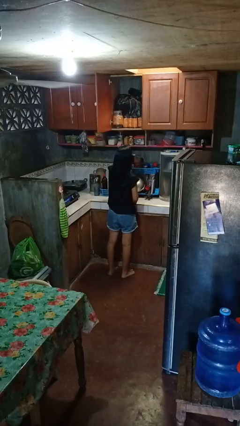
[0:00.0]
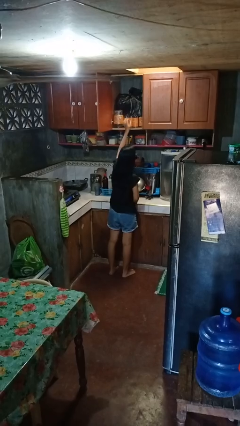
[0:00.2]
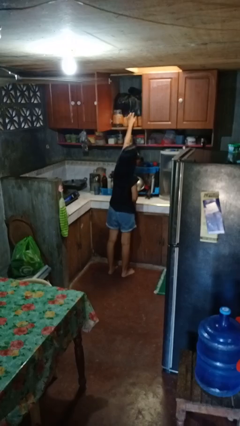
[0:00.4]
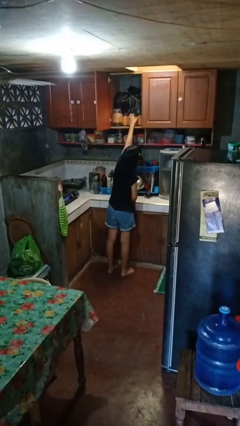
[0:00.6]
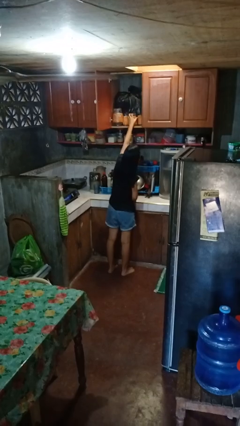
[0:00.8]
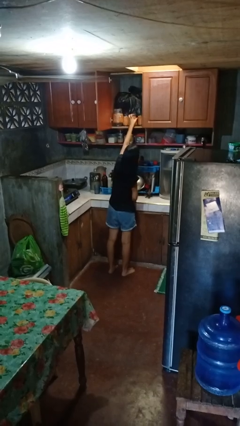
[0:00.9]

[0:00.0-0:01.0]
person picks up object from cabinet

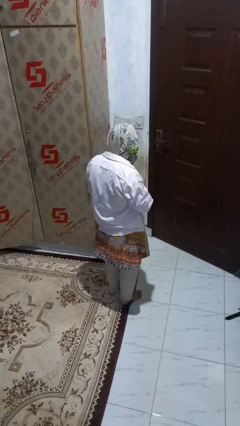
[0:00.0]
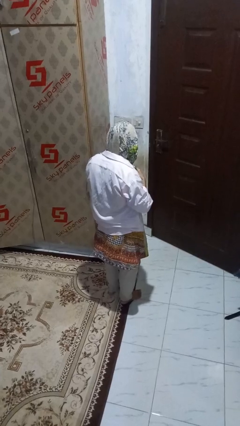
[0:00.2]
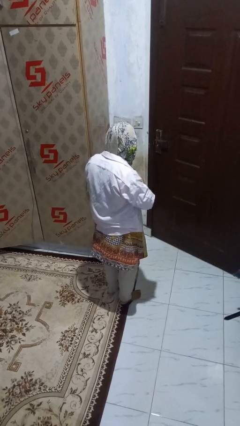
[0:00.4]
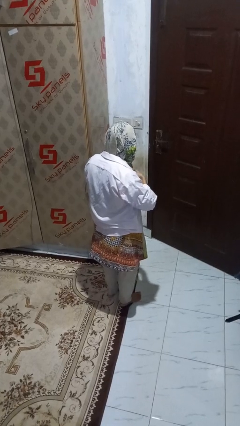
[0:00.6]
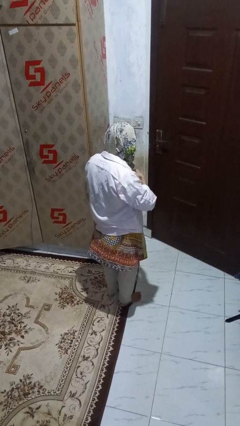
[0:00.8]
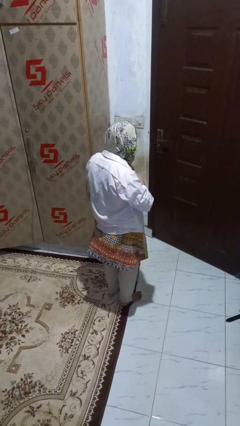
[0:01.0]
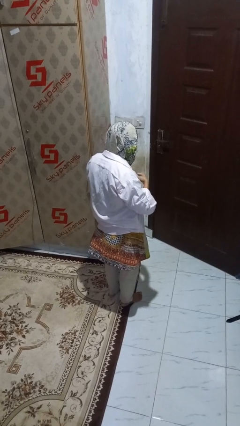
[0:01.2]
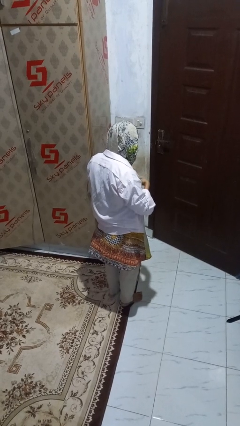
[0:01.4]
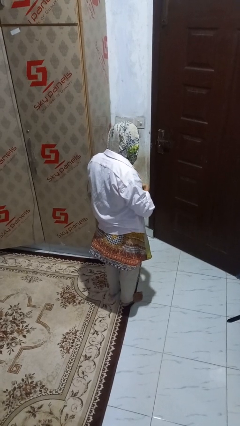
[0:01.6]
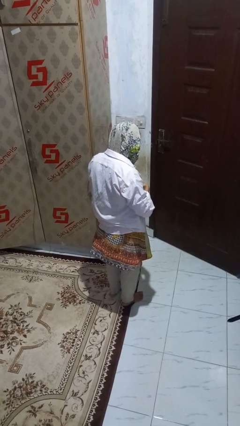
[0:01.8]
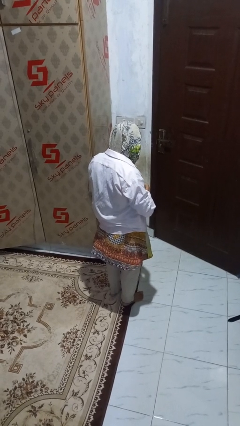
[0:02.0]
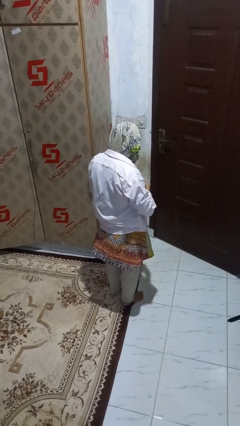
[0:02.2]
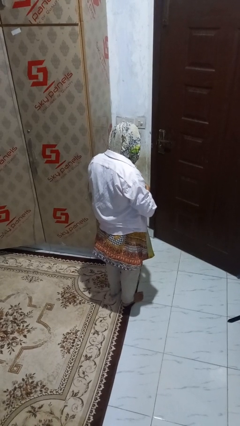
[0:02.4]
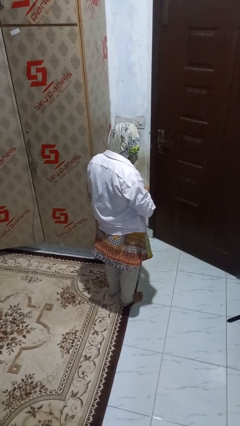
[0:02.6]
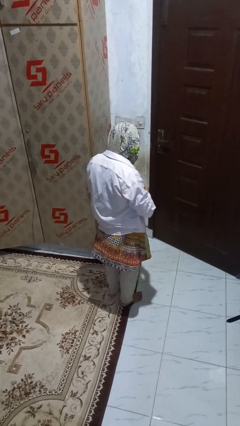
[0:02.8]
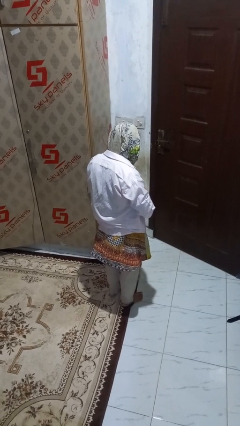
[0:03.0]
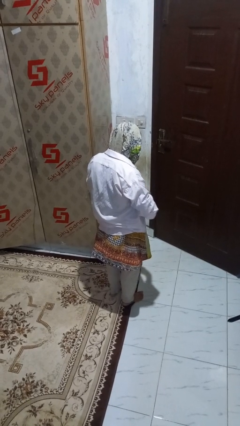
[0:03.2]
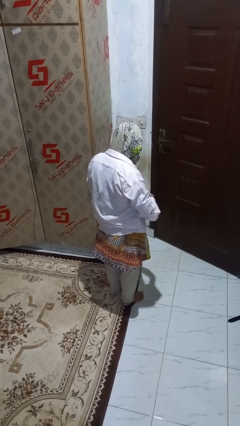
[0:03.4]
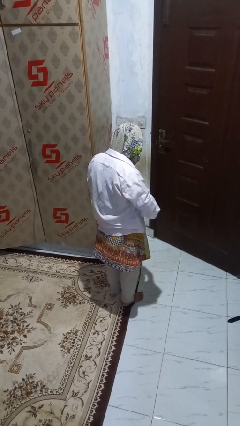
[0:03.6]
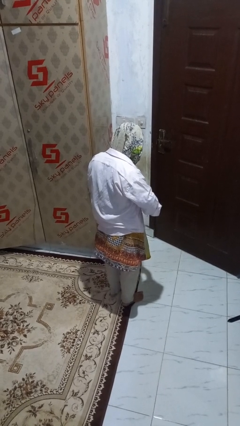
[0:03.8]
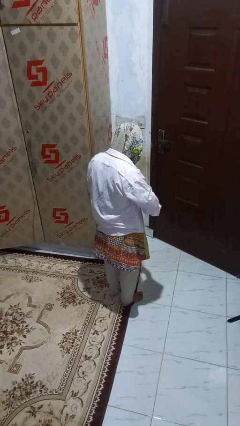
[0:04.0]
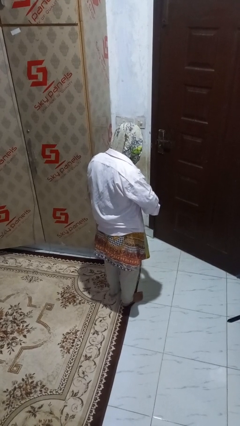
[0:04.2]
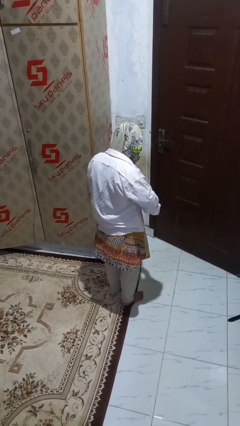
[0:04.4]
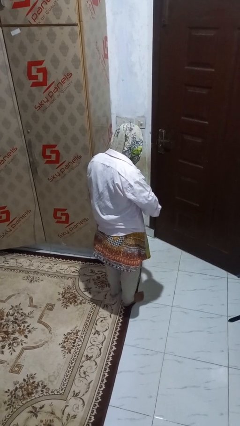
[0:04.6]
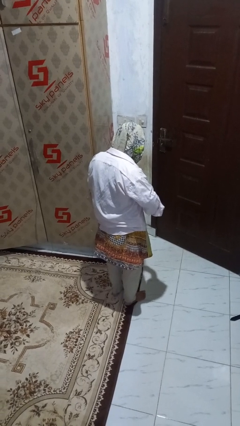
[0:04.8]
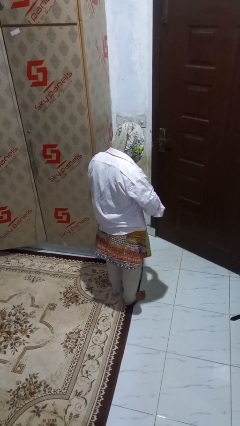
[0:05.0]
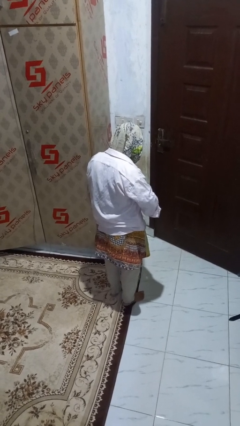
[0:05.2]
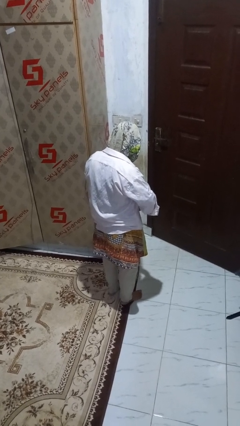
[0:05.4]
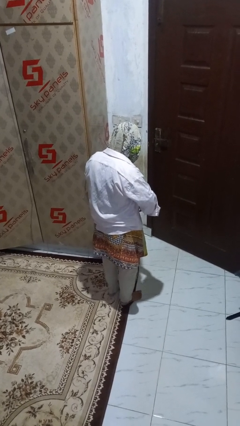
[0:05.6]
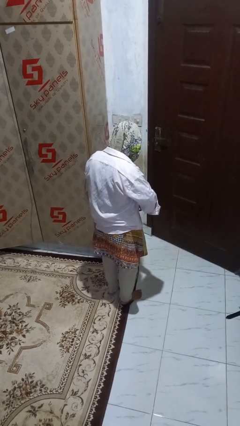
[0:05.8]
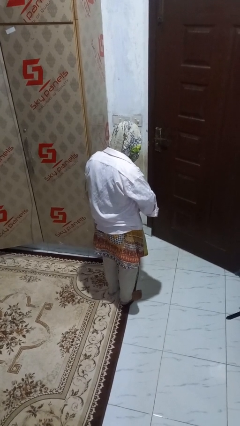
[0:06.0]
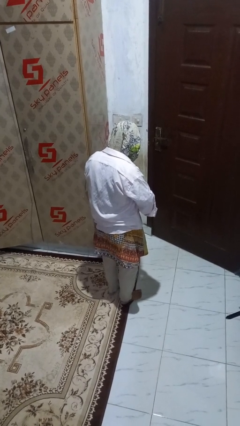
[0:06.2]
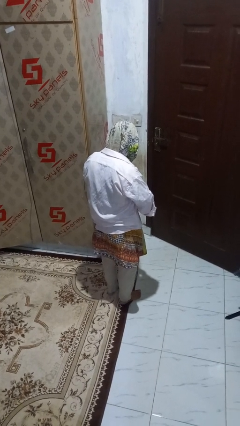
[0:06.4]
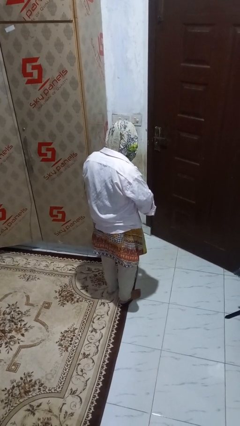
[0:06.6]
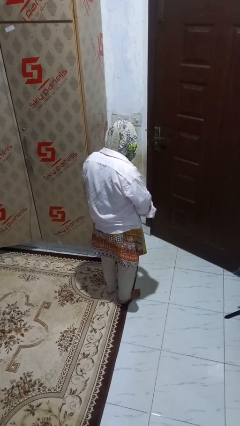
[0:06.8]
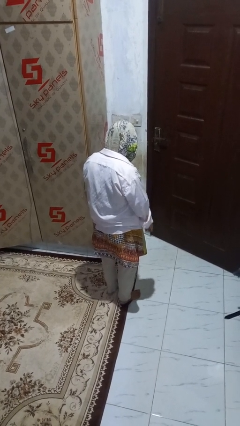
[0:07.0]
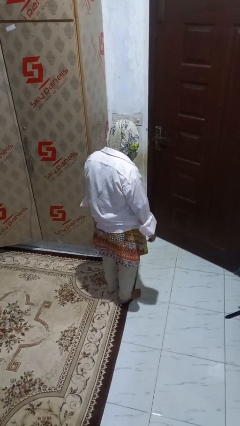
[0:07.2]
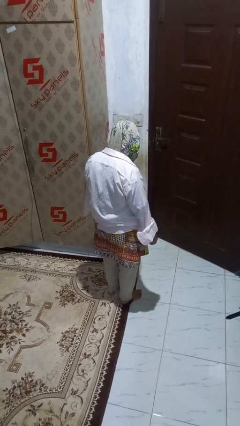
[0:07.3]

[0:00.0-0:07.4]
person buttons shirt

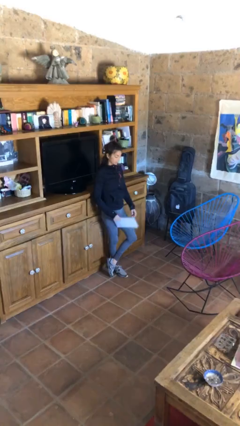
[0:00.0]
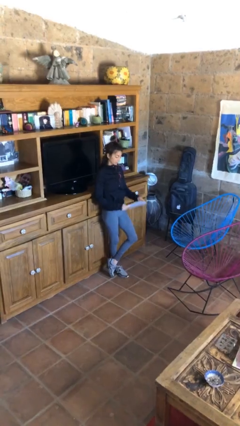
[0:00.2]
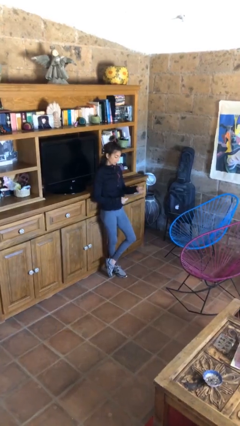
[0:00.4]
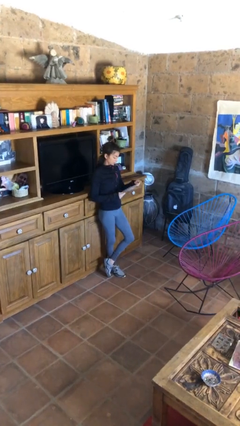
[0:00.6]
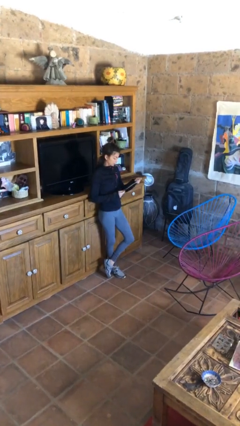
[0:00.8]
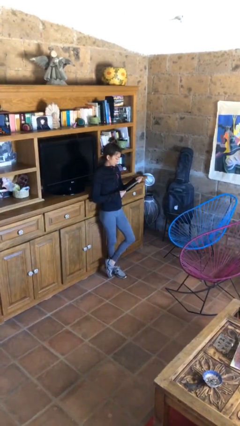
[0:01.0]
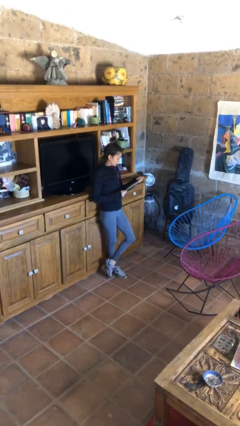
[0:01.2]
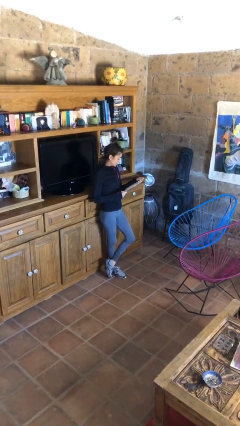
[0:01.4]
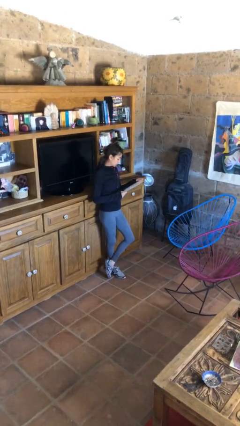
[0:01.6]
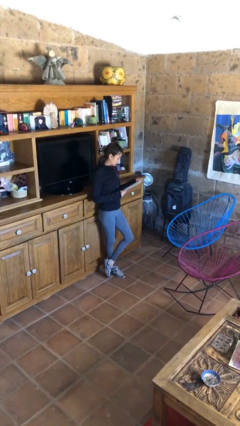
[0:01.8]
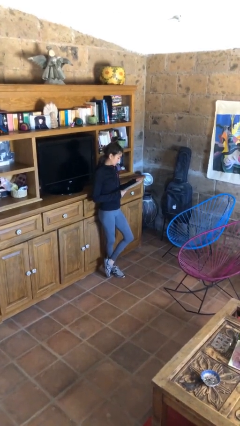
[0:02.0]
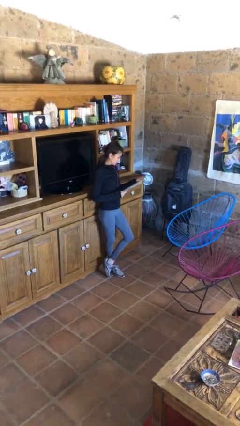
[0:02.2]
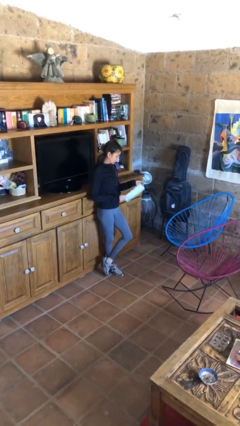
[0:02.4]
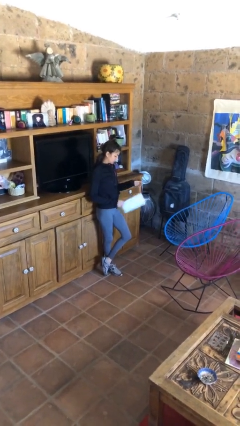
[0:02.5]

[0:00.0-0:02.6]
person reads document

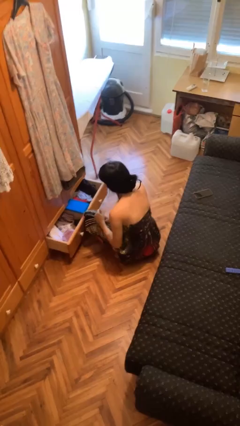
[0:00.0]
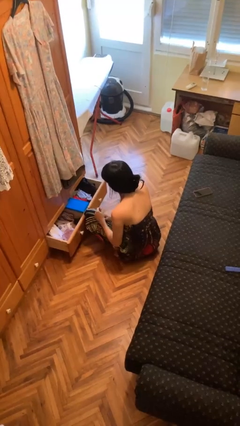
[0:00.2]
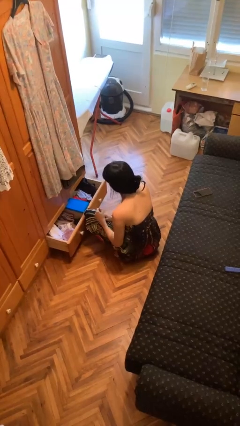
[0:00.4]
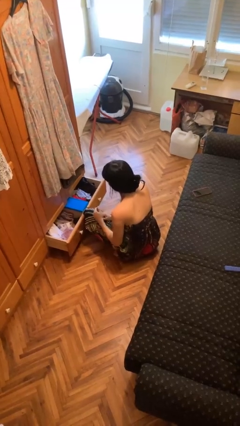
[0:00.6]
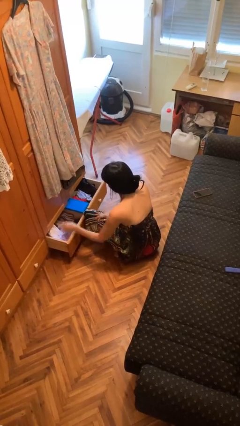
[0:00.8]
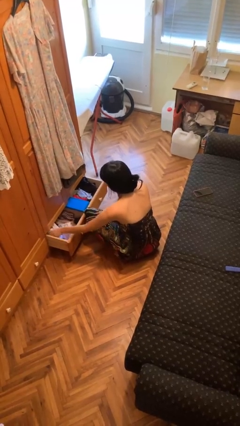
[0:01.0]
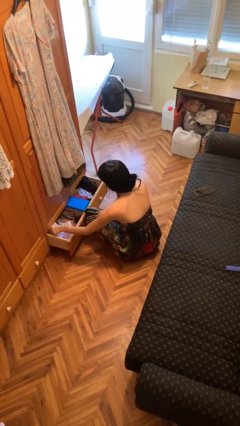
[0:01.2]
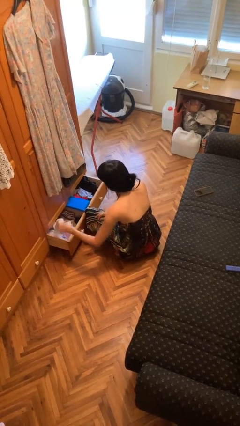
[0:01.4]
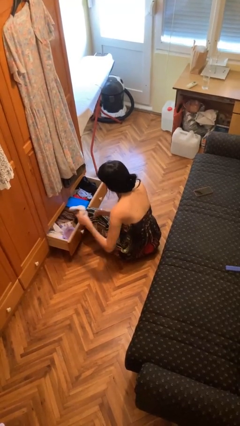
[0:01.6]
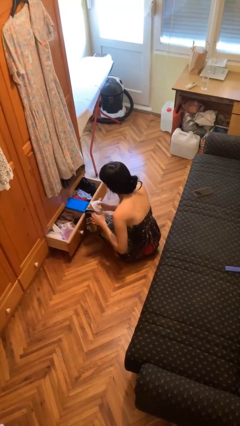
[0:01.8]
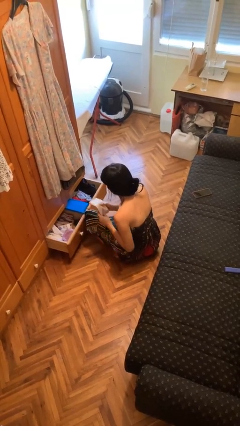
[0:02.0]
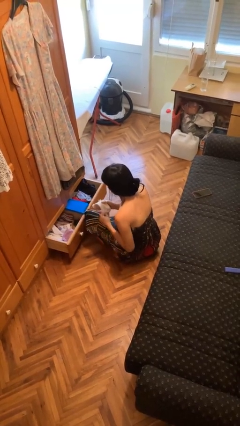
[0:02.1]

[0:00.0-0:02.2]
person takes clothes from dresser

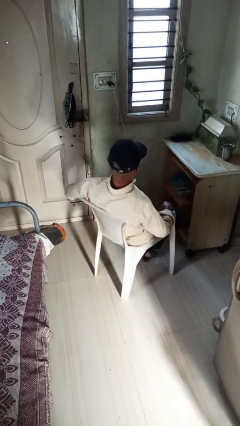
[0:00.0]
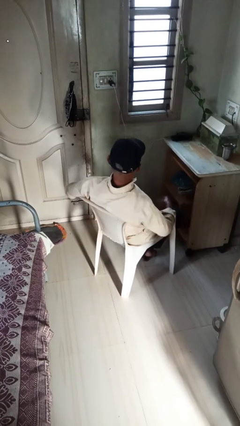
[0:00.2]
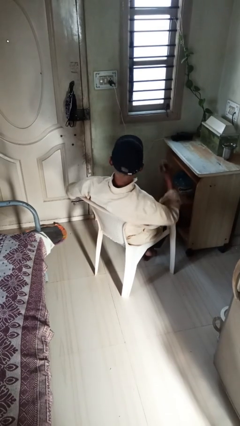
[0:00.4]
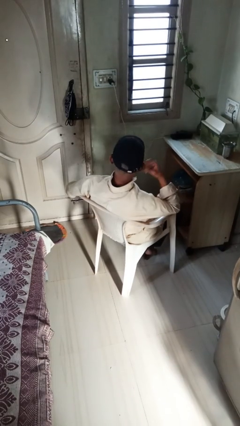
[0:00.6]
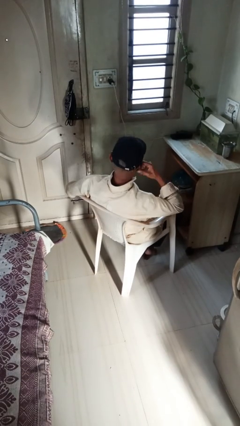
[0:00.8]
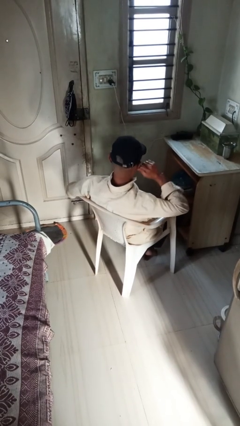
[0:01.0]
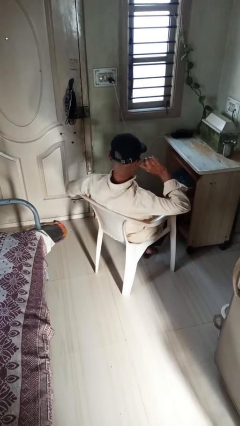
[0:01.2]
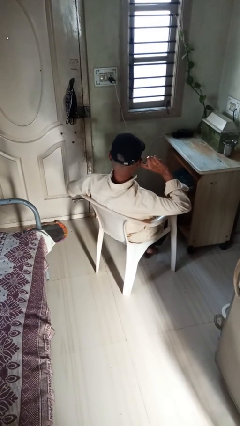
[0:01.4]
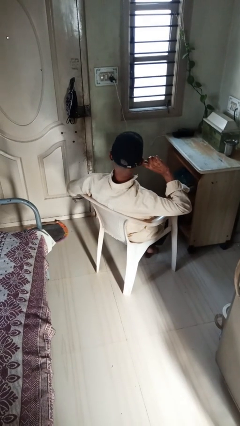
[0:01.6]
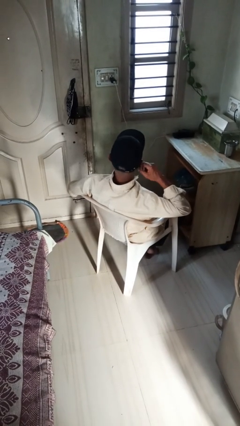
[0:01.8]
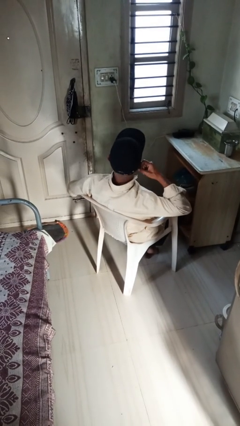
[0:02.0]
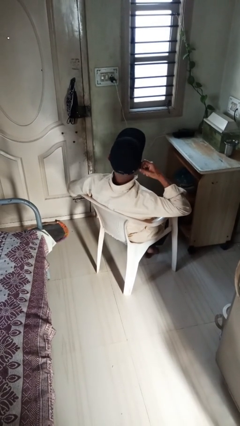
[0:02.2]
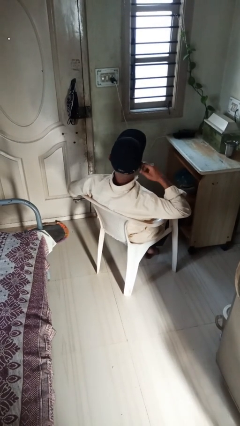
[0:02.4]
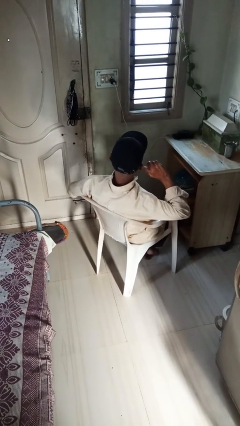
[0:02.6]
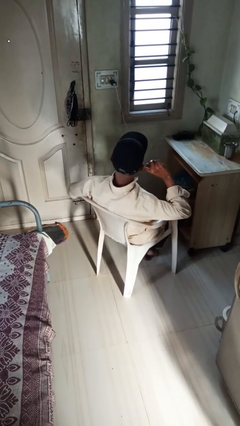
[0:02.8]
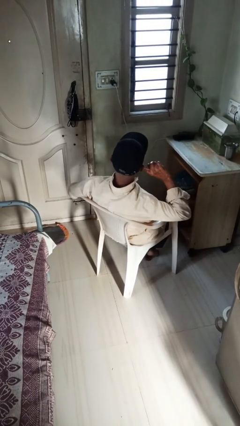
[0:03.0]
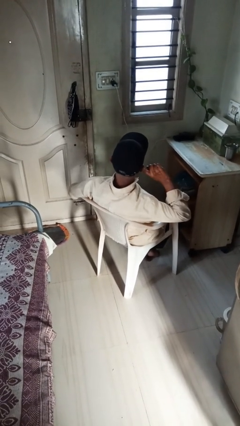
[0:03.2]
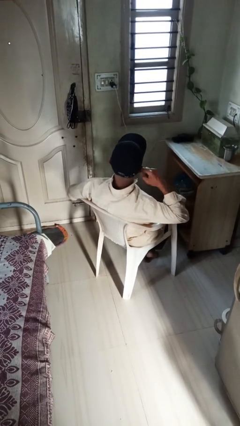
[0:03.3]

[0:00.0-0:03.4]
person puts fingers in ear

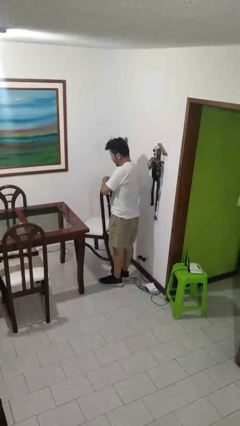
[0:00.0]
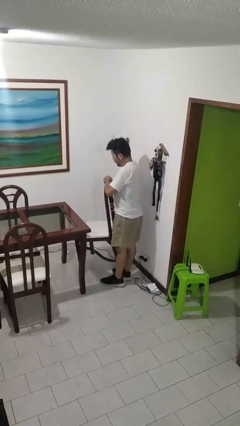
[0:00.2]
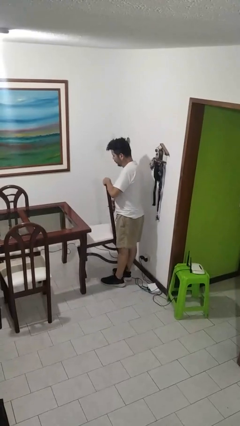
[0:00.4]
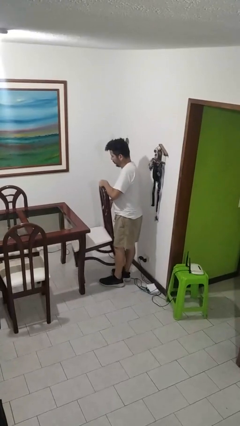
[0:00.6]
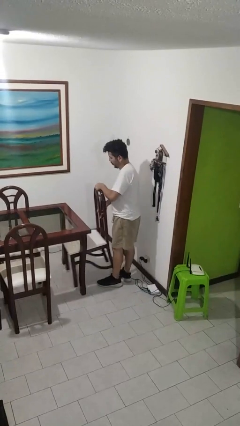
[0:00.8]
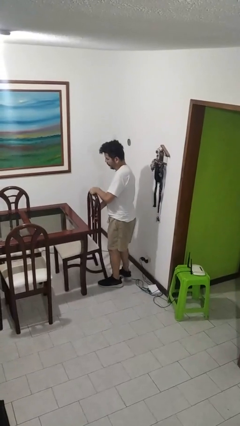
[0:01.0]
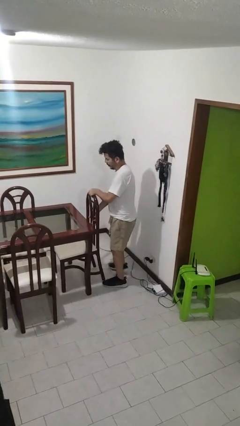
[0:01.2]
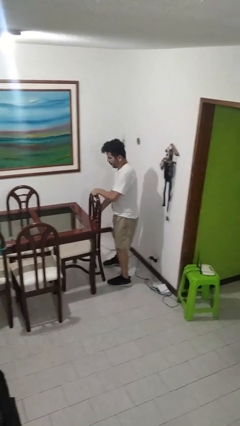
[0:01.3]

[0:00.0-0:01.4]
person pushes in chair
